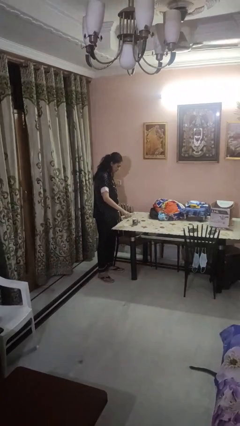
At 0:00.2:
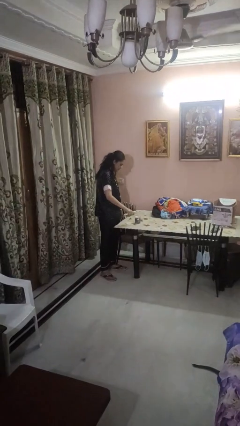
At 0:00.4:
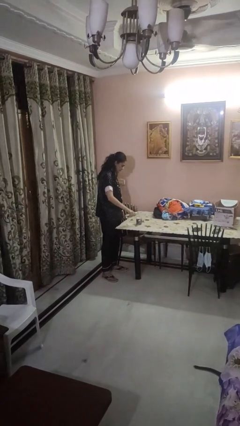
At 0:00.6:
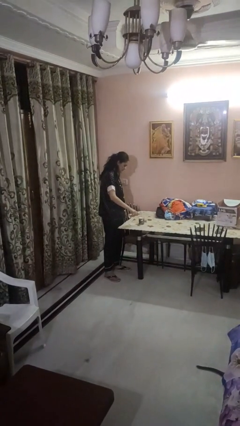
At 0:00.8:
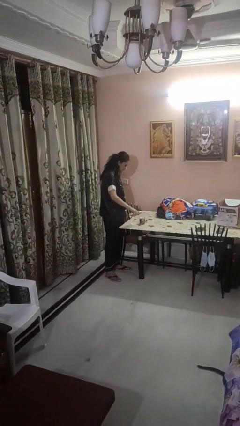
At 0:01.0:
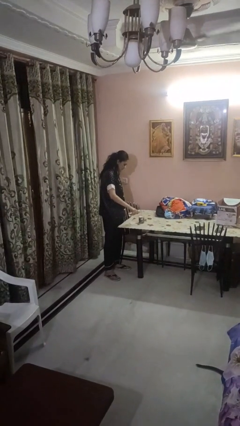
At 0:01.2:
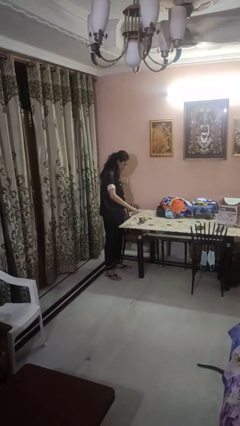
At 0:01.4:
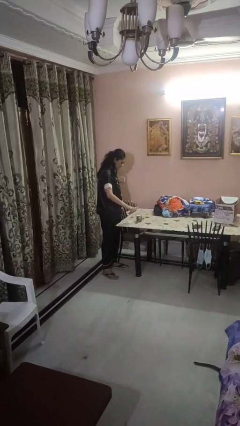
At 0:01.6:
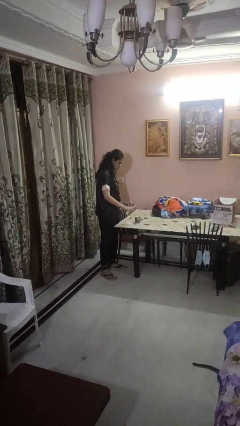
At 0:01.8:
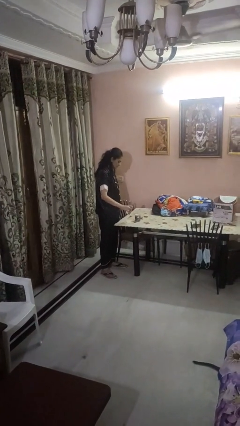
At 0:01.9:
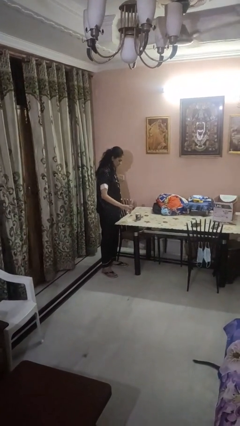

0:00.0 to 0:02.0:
person pours liquid into cup

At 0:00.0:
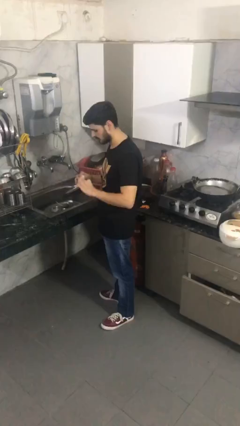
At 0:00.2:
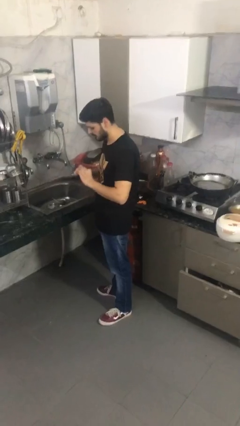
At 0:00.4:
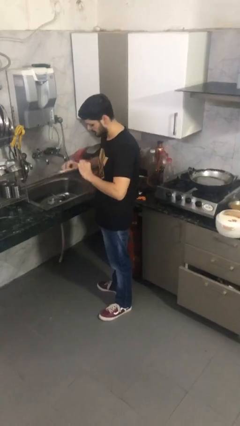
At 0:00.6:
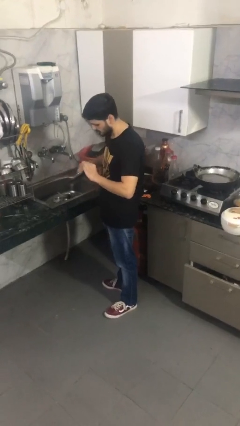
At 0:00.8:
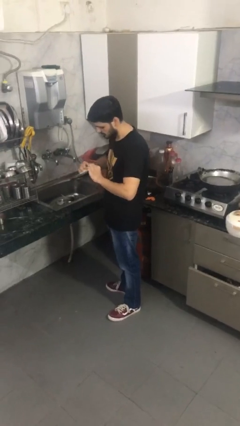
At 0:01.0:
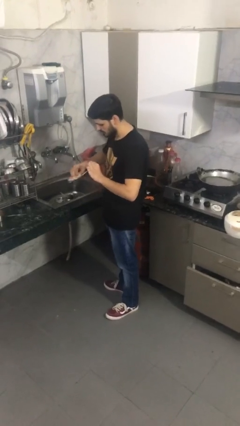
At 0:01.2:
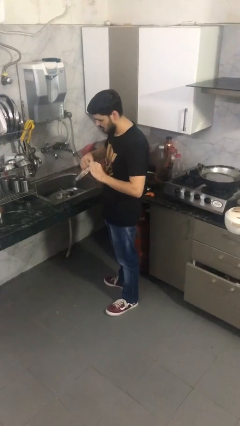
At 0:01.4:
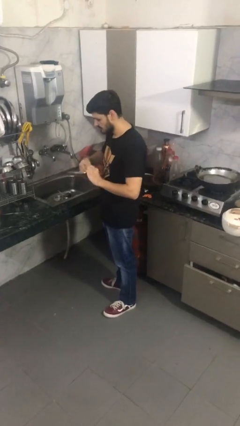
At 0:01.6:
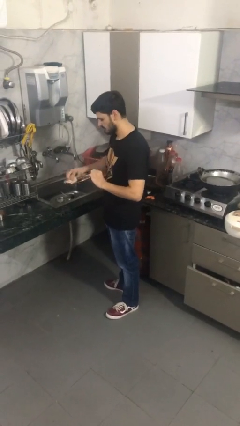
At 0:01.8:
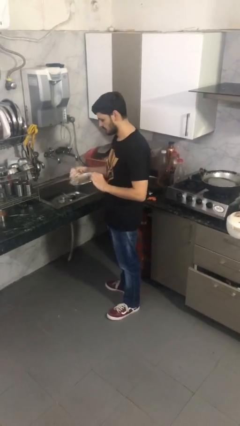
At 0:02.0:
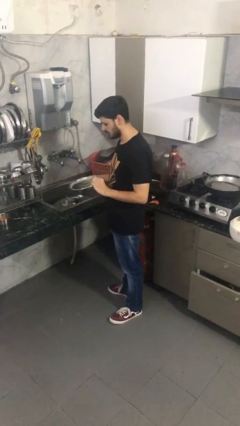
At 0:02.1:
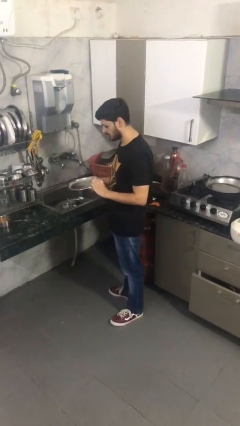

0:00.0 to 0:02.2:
person dries dish

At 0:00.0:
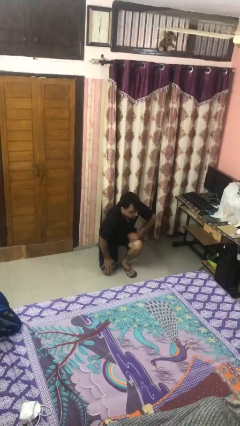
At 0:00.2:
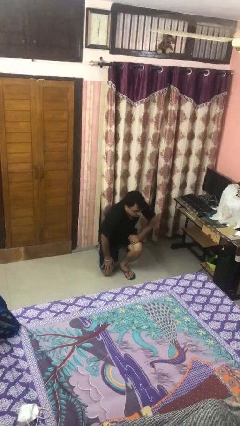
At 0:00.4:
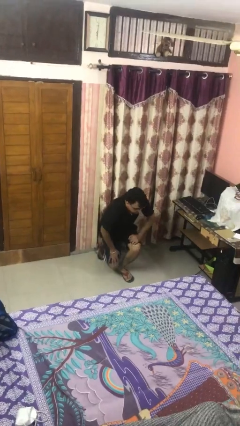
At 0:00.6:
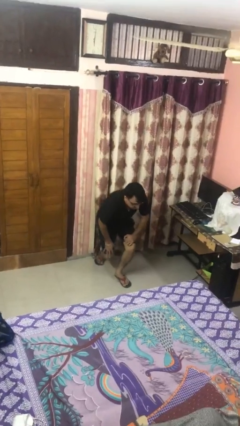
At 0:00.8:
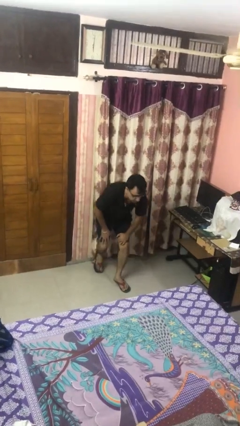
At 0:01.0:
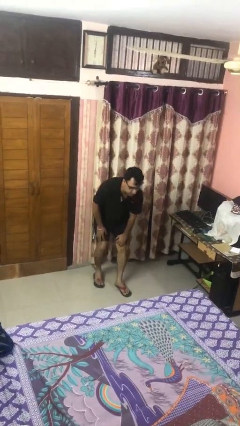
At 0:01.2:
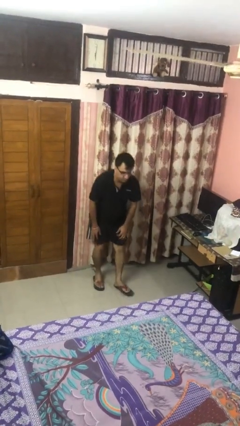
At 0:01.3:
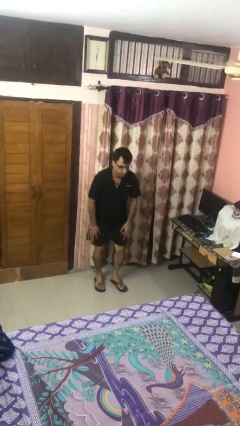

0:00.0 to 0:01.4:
person stands up from floor

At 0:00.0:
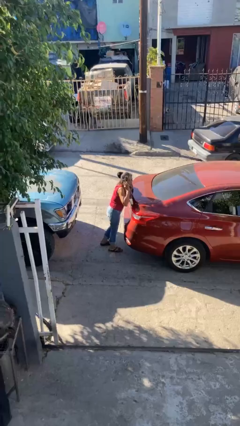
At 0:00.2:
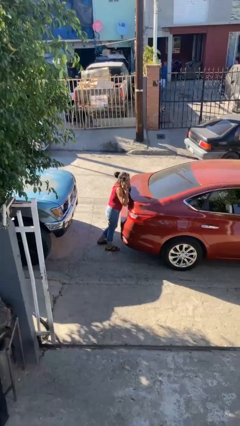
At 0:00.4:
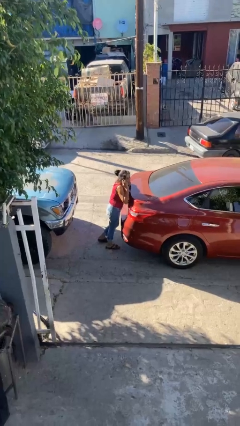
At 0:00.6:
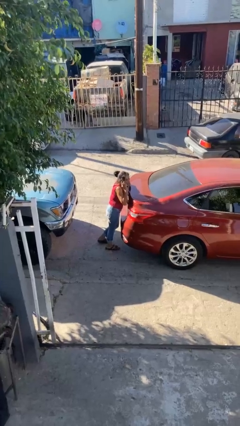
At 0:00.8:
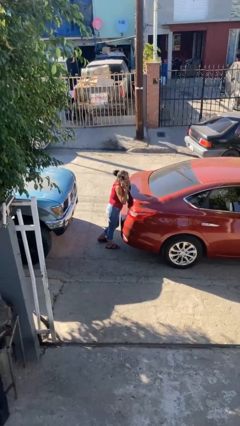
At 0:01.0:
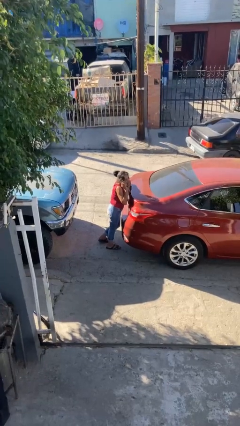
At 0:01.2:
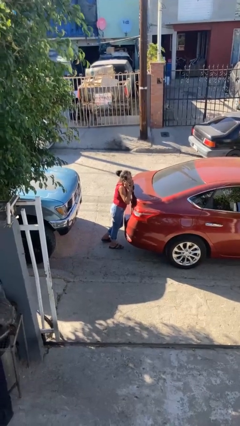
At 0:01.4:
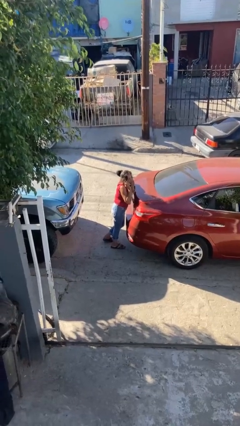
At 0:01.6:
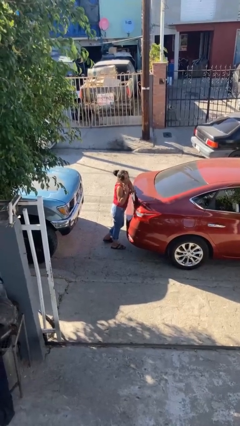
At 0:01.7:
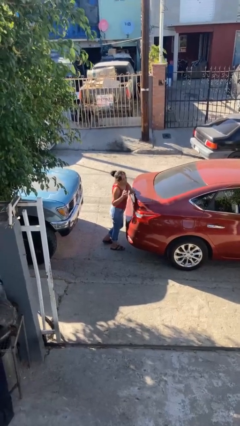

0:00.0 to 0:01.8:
person leans against car

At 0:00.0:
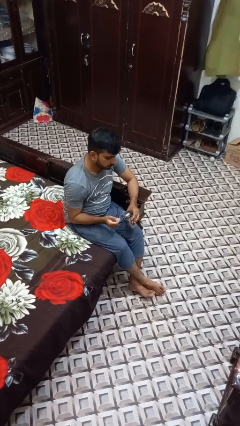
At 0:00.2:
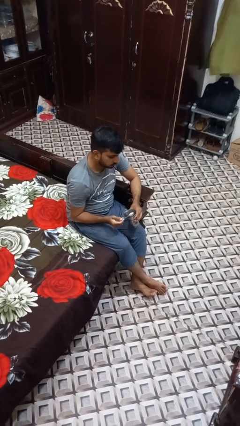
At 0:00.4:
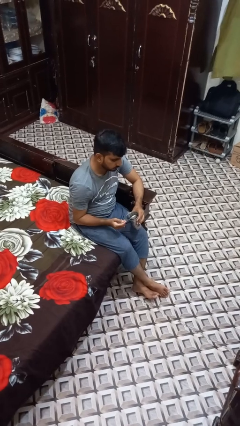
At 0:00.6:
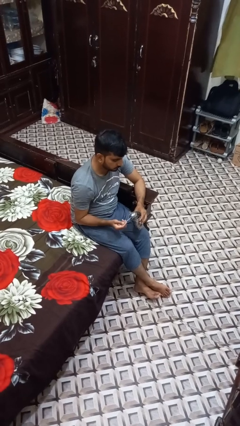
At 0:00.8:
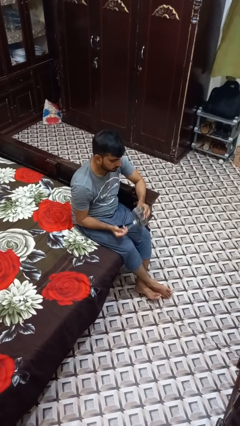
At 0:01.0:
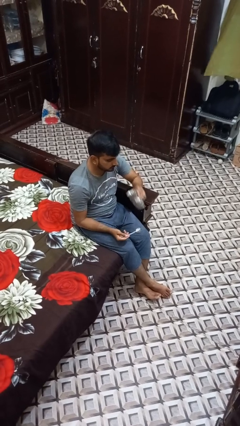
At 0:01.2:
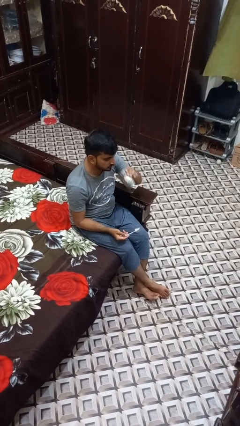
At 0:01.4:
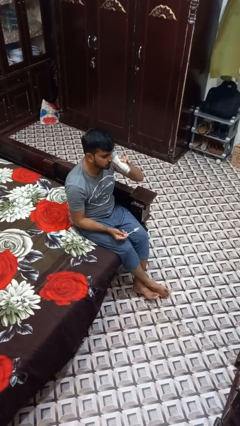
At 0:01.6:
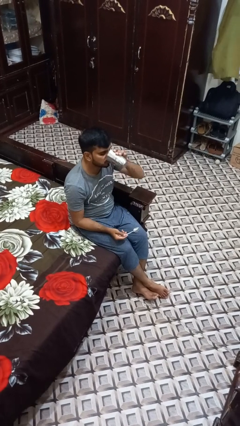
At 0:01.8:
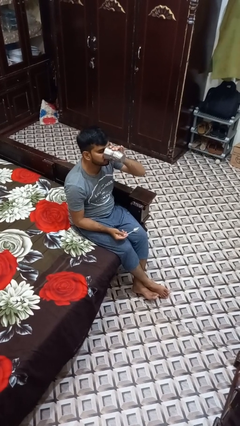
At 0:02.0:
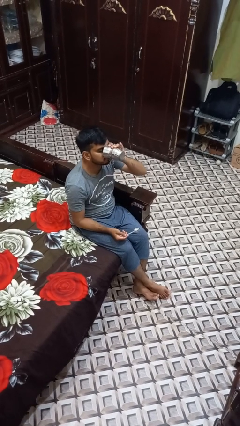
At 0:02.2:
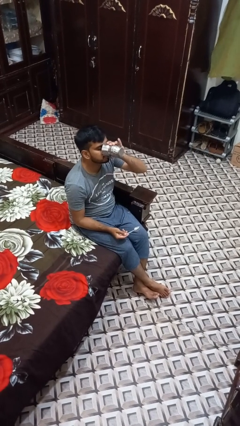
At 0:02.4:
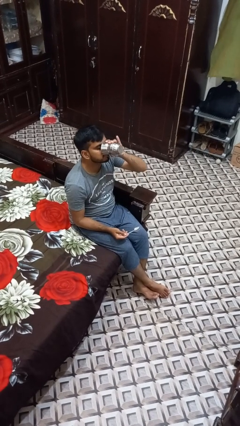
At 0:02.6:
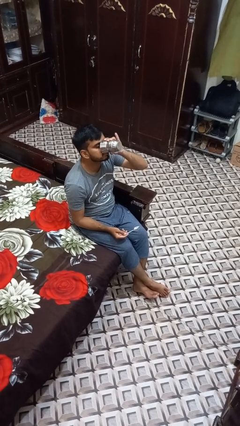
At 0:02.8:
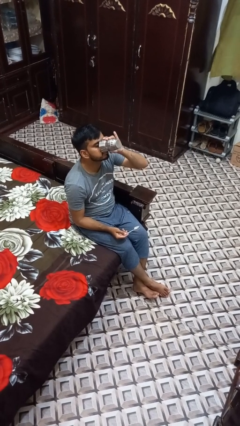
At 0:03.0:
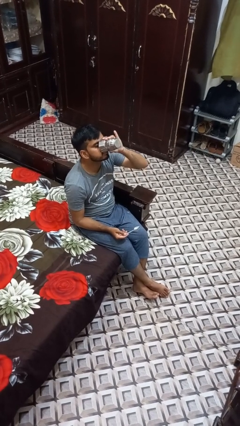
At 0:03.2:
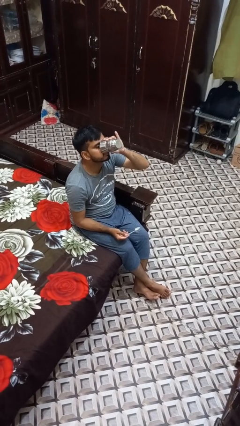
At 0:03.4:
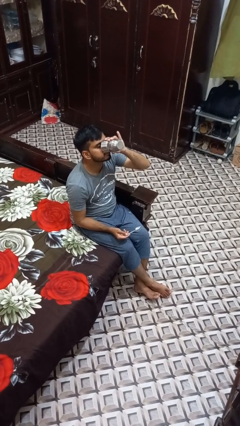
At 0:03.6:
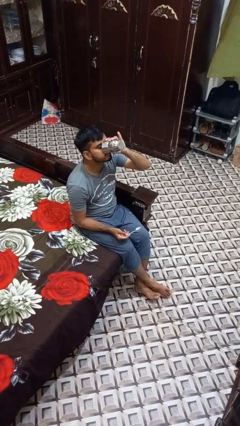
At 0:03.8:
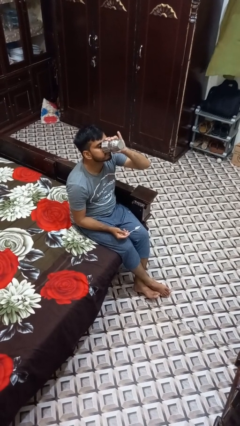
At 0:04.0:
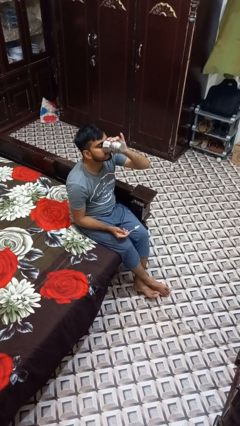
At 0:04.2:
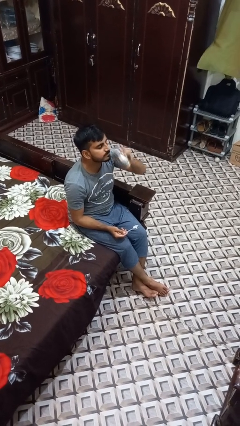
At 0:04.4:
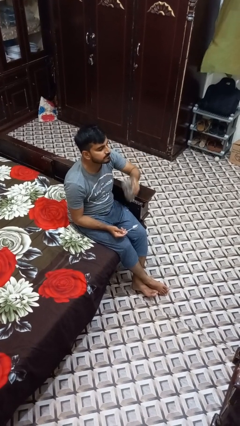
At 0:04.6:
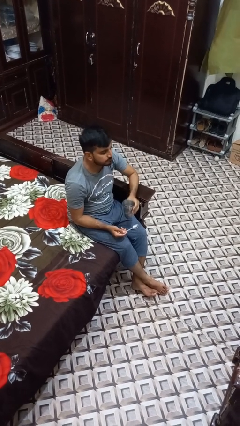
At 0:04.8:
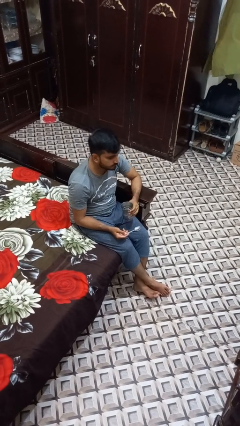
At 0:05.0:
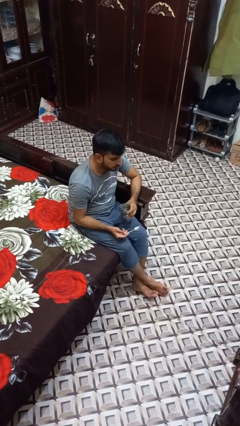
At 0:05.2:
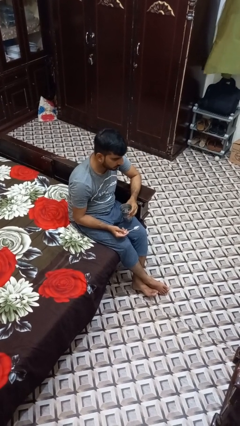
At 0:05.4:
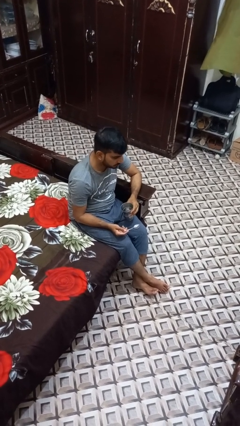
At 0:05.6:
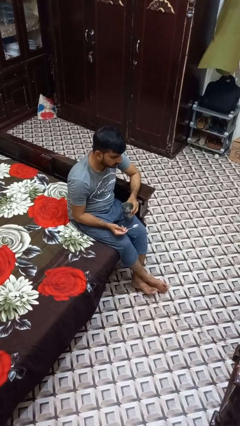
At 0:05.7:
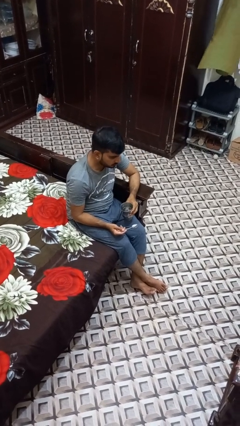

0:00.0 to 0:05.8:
person drinks from mug

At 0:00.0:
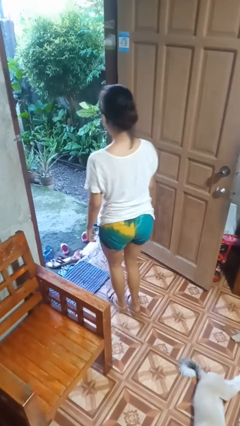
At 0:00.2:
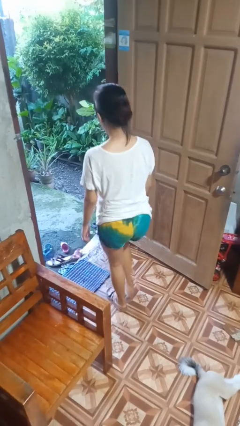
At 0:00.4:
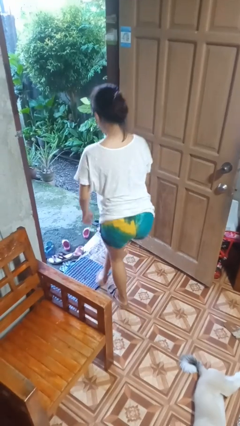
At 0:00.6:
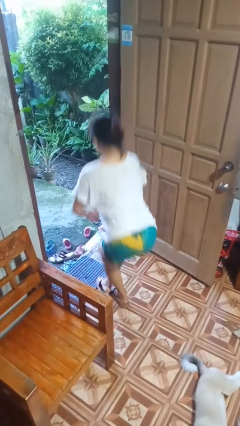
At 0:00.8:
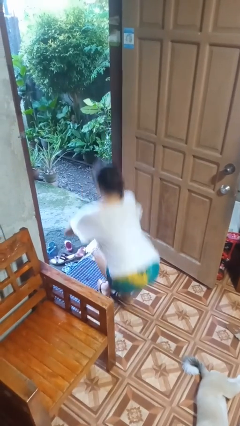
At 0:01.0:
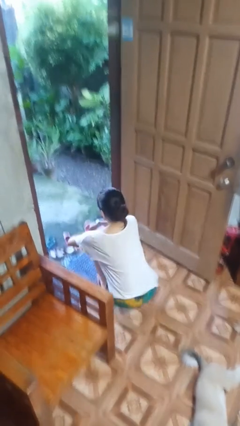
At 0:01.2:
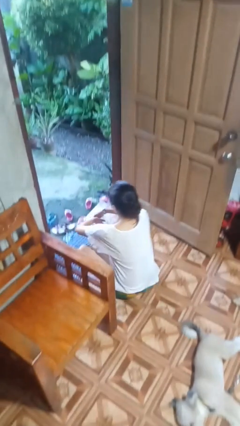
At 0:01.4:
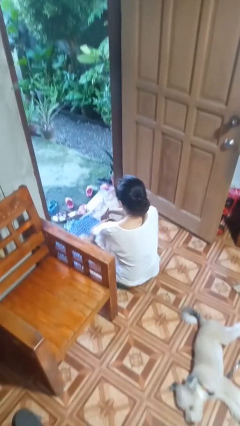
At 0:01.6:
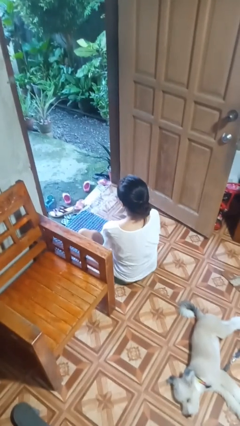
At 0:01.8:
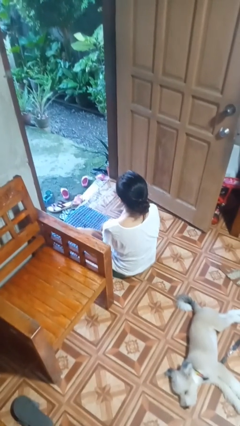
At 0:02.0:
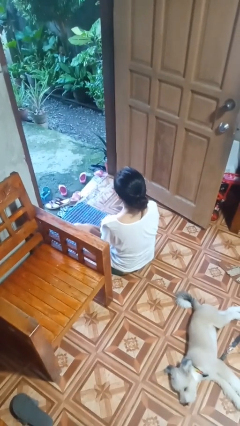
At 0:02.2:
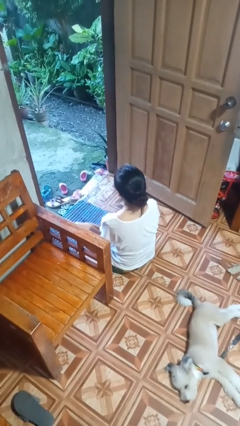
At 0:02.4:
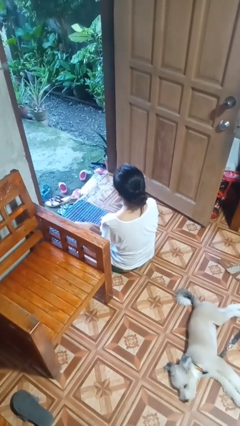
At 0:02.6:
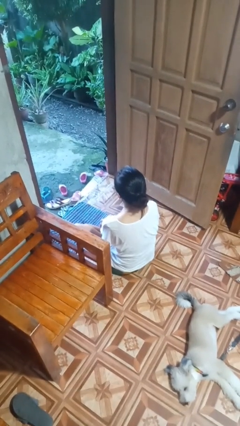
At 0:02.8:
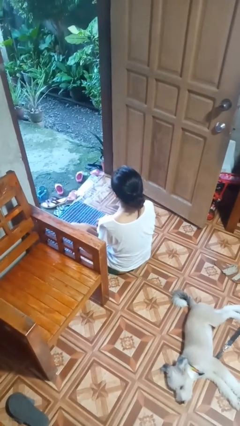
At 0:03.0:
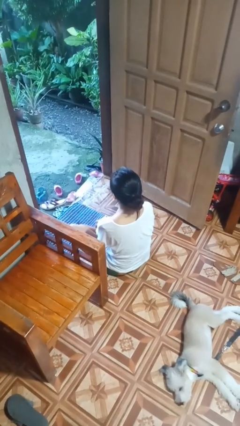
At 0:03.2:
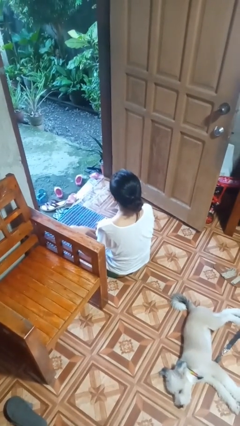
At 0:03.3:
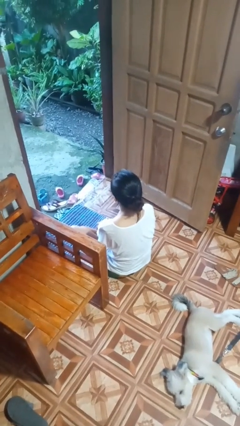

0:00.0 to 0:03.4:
person sits crisscross

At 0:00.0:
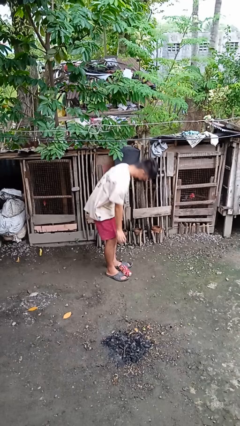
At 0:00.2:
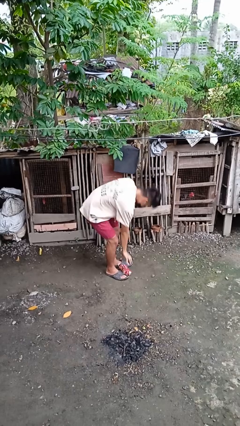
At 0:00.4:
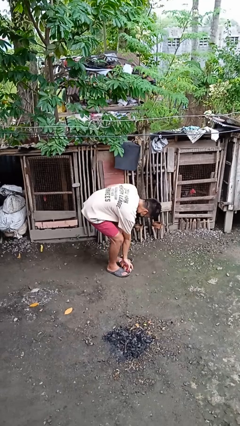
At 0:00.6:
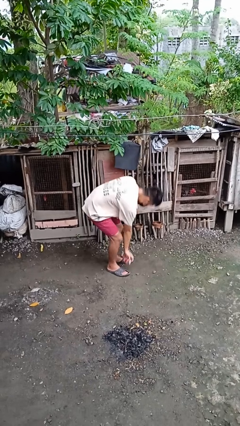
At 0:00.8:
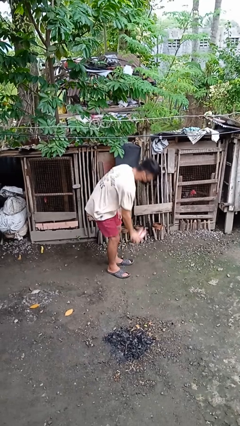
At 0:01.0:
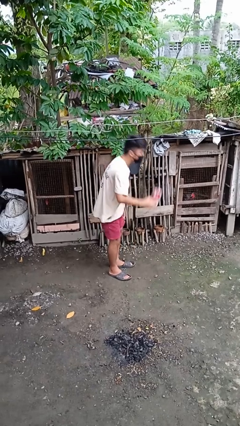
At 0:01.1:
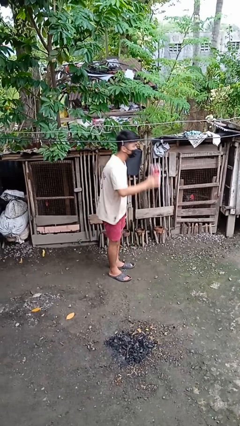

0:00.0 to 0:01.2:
person picks up object from floor
